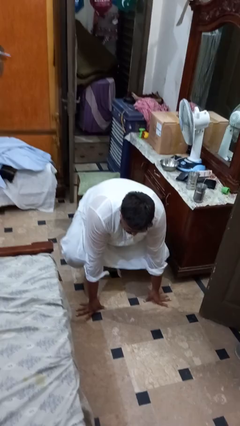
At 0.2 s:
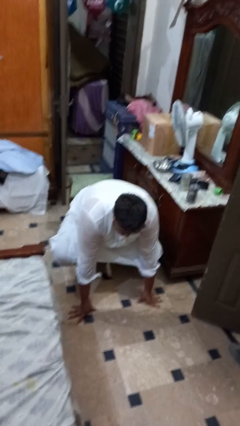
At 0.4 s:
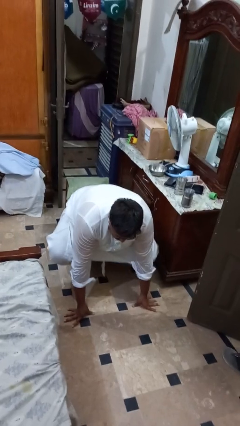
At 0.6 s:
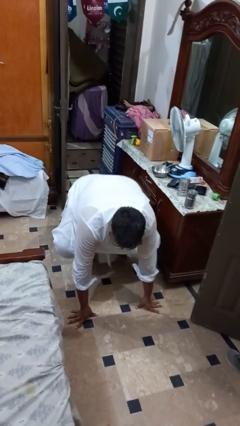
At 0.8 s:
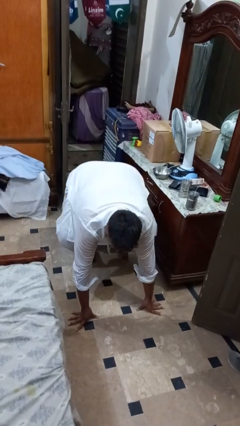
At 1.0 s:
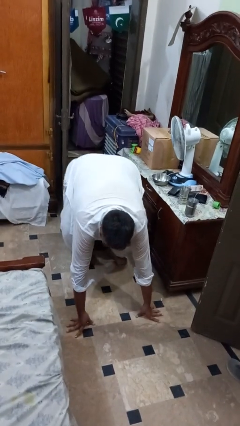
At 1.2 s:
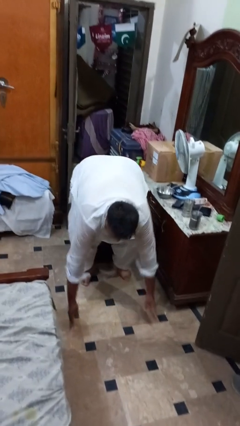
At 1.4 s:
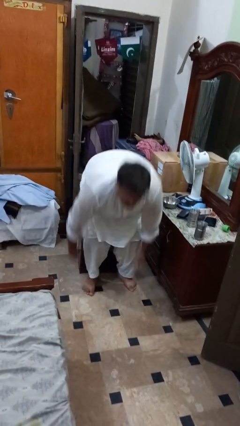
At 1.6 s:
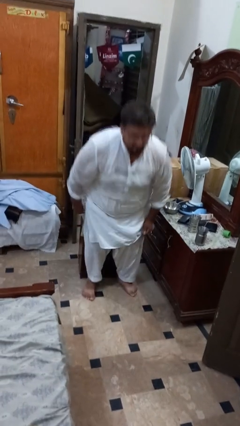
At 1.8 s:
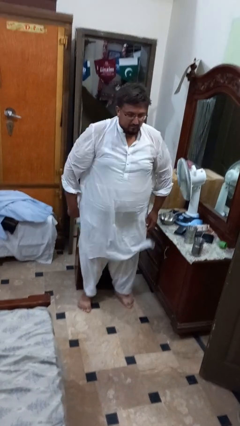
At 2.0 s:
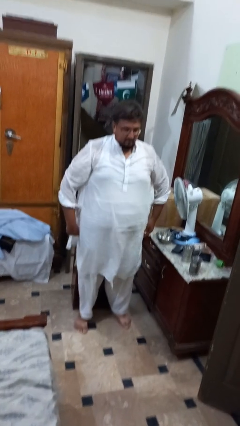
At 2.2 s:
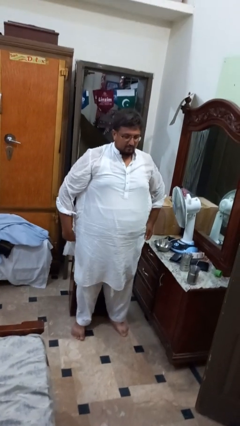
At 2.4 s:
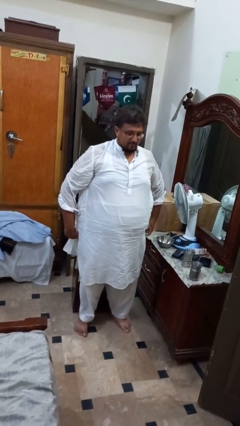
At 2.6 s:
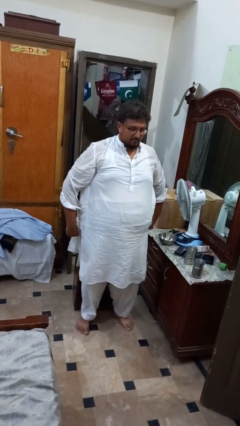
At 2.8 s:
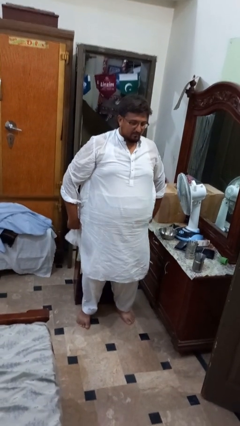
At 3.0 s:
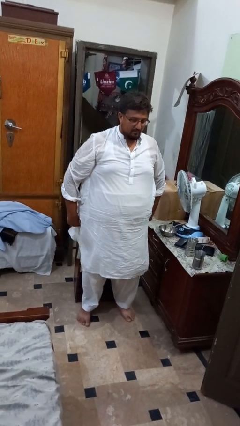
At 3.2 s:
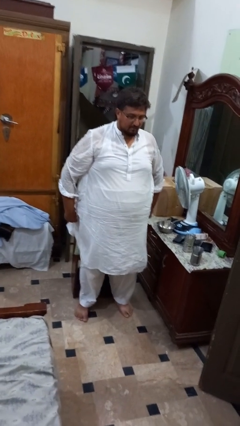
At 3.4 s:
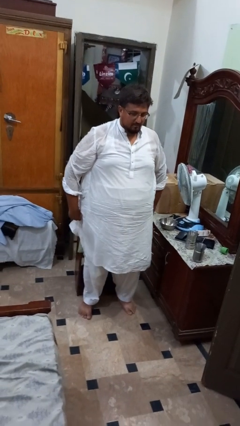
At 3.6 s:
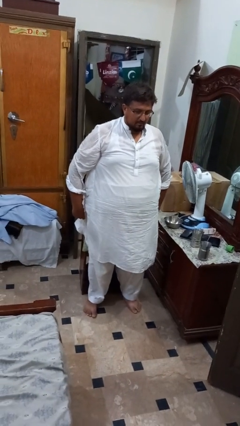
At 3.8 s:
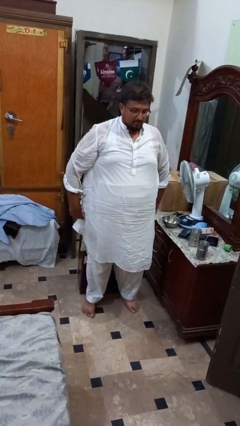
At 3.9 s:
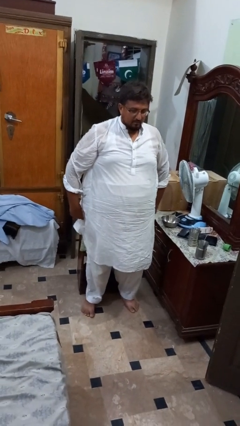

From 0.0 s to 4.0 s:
person stands up from floor

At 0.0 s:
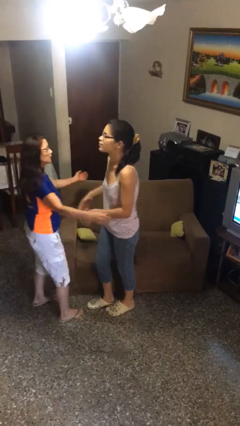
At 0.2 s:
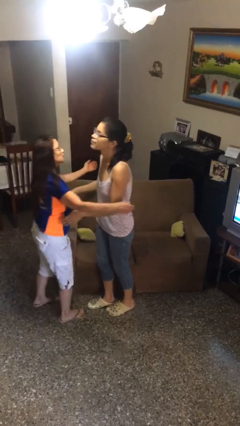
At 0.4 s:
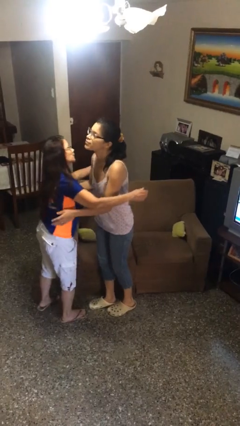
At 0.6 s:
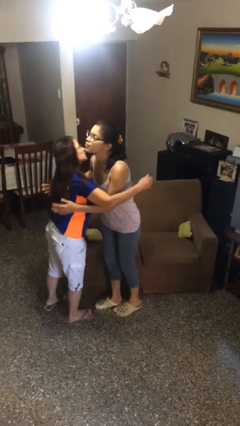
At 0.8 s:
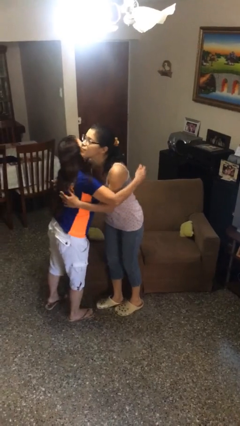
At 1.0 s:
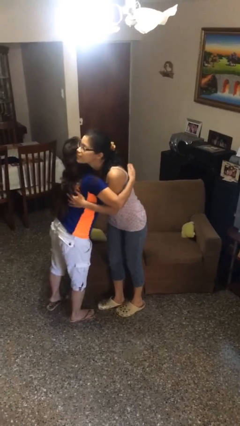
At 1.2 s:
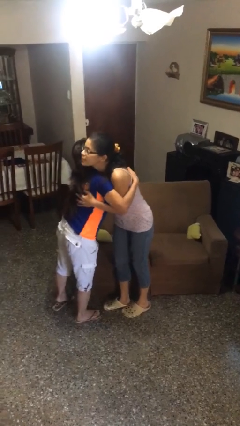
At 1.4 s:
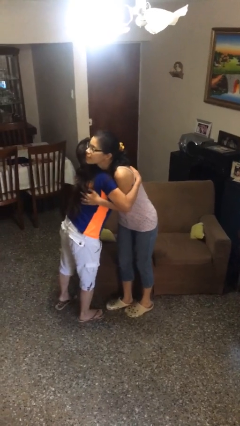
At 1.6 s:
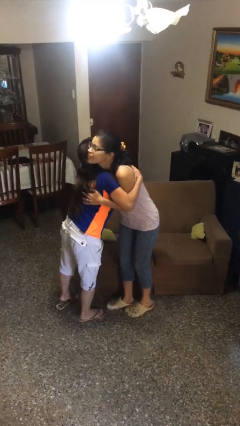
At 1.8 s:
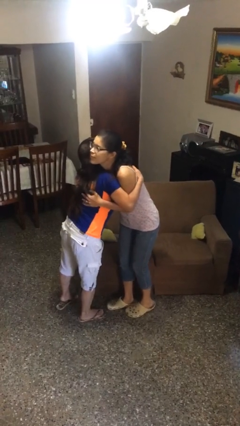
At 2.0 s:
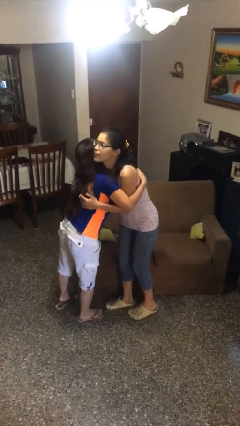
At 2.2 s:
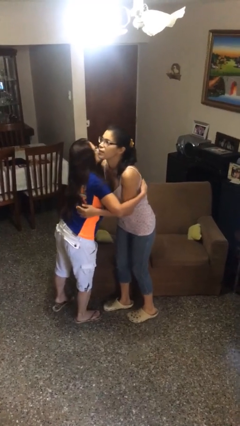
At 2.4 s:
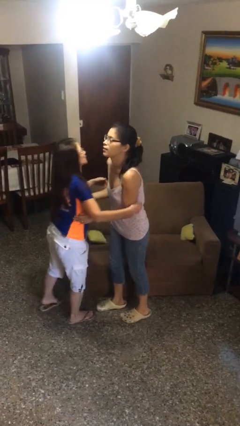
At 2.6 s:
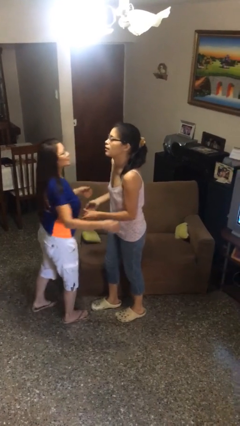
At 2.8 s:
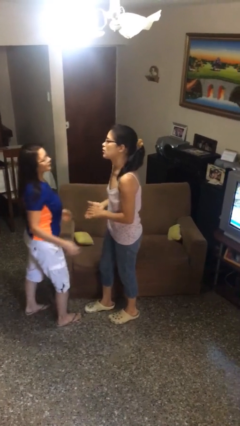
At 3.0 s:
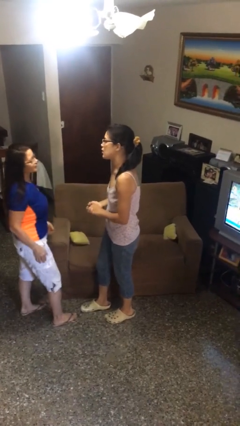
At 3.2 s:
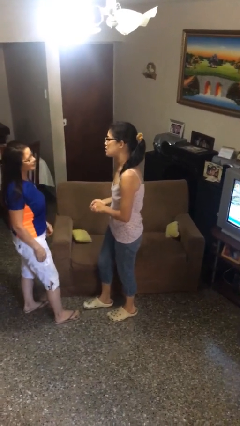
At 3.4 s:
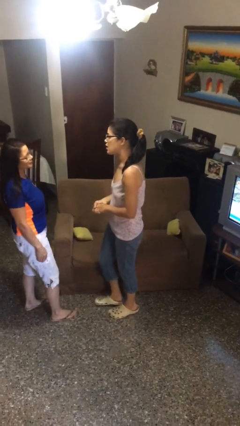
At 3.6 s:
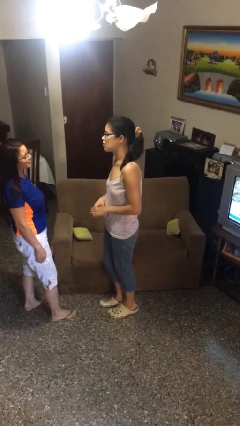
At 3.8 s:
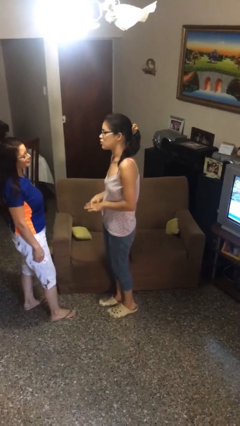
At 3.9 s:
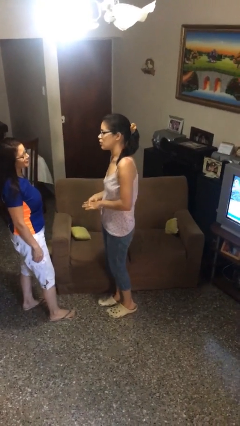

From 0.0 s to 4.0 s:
person embraces person

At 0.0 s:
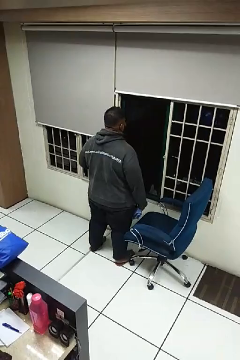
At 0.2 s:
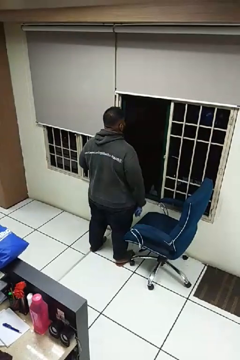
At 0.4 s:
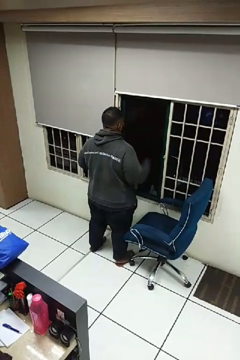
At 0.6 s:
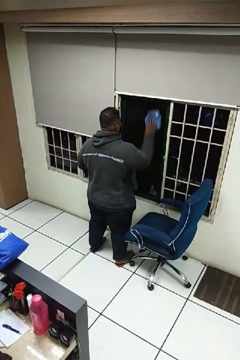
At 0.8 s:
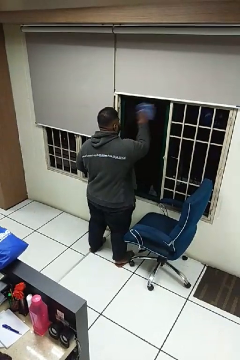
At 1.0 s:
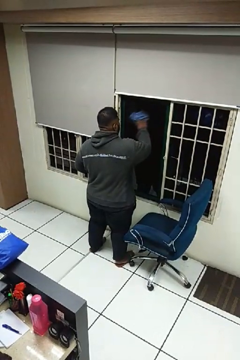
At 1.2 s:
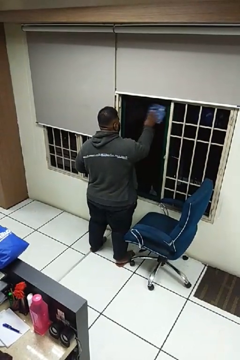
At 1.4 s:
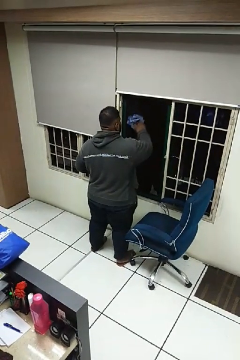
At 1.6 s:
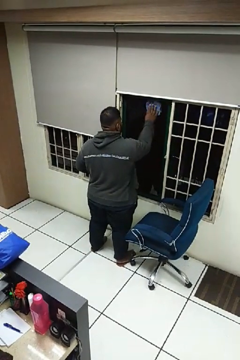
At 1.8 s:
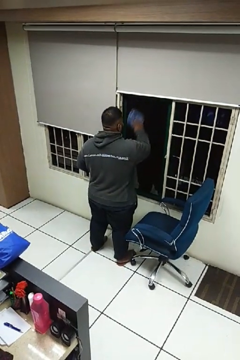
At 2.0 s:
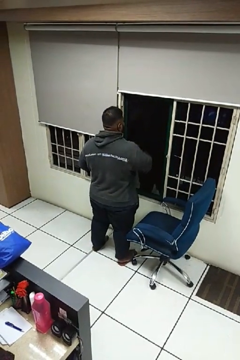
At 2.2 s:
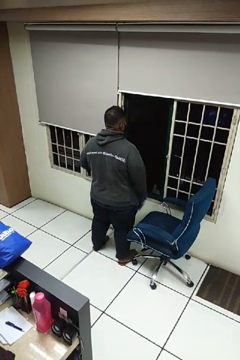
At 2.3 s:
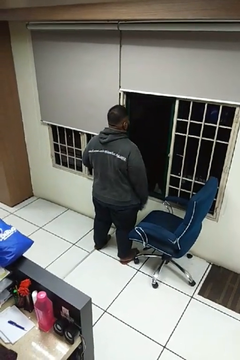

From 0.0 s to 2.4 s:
person washes window

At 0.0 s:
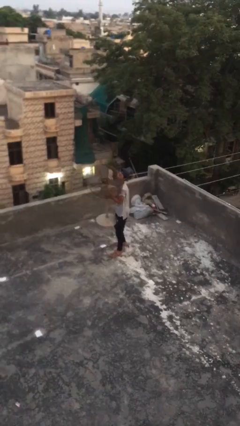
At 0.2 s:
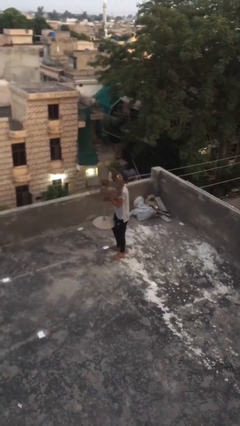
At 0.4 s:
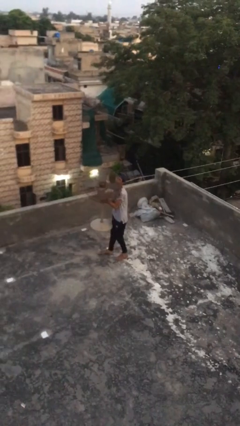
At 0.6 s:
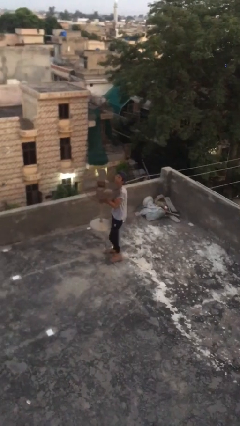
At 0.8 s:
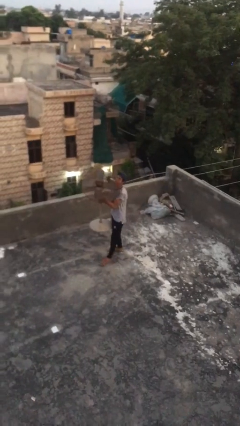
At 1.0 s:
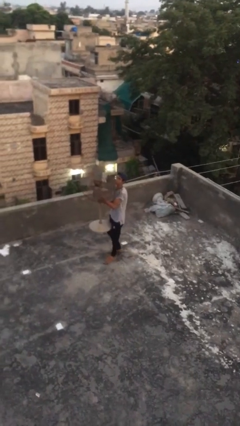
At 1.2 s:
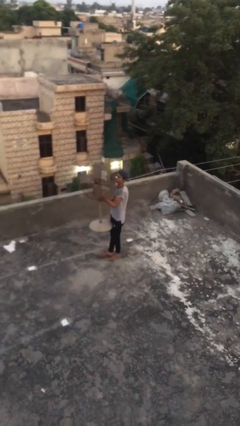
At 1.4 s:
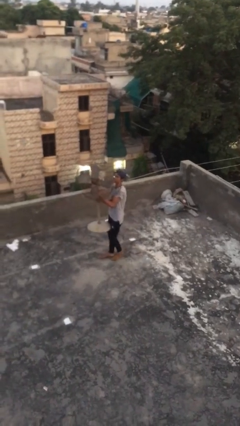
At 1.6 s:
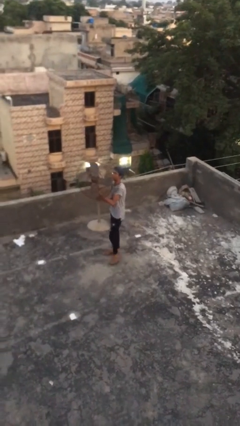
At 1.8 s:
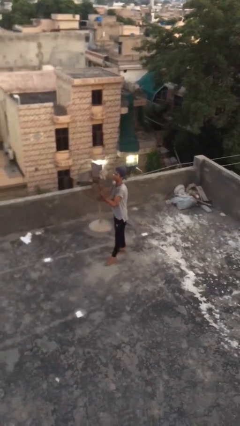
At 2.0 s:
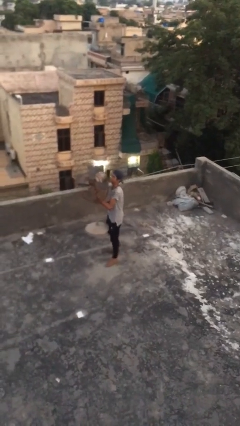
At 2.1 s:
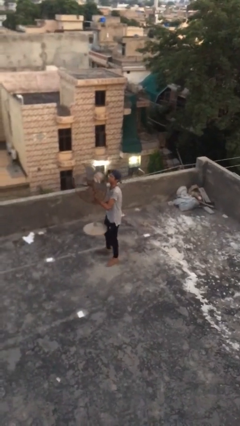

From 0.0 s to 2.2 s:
person carries heavy object

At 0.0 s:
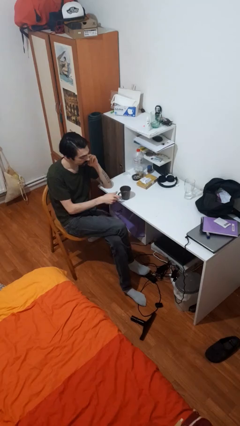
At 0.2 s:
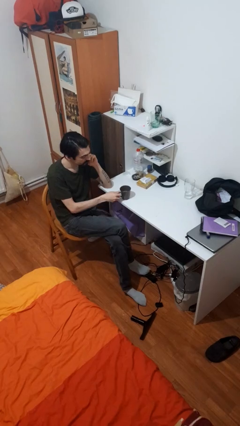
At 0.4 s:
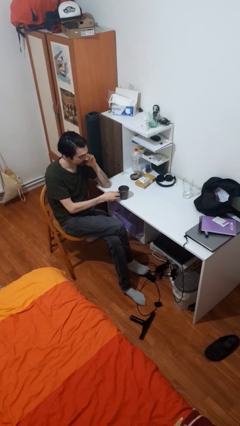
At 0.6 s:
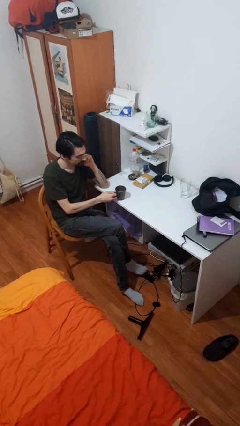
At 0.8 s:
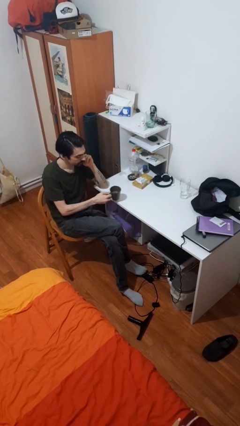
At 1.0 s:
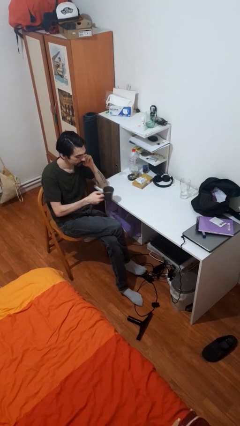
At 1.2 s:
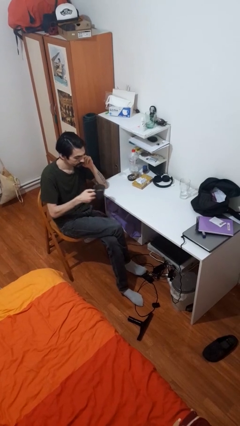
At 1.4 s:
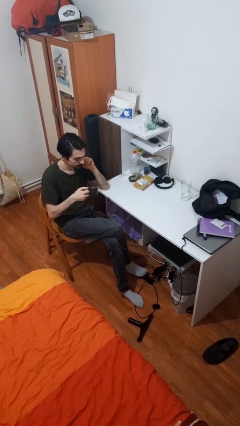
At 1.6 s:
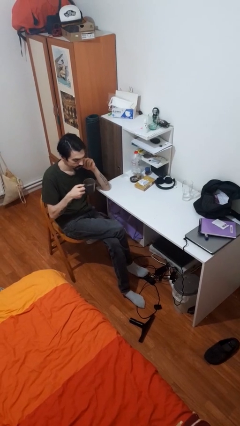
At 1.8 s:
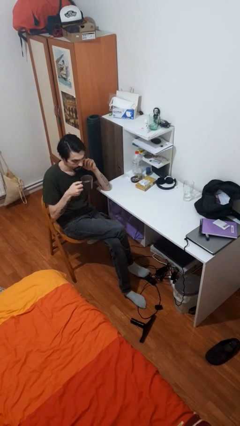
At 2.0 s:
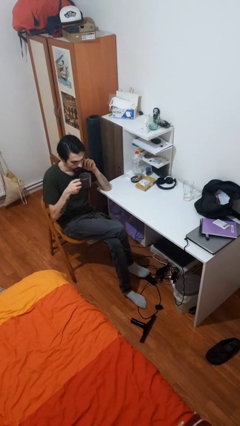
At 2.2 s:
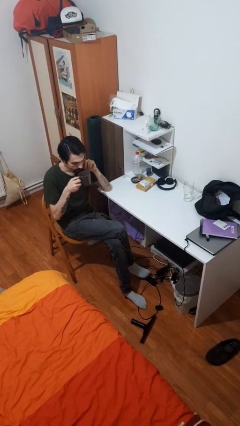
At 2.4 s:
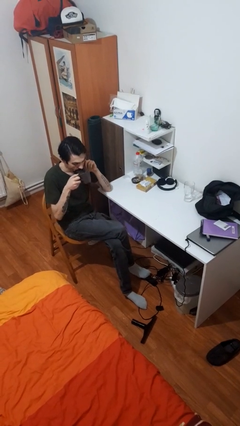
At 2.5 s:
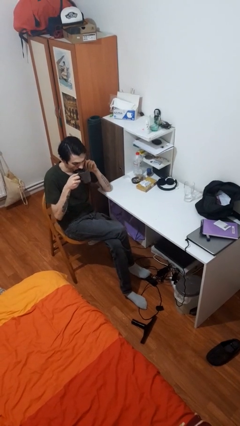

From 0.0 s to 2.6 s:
person picks up object from table

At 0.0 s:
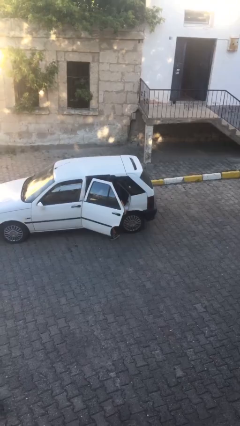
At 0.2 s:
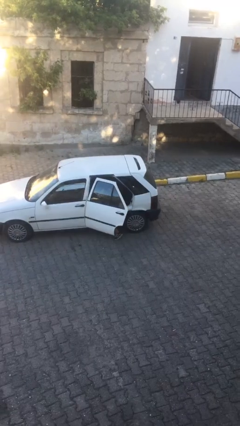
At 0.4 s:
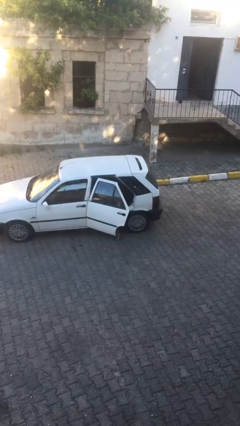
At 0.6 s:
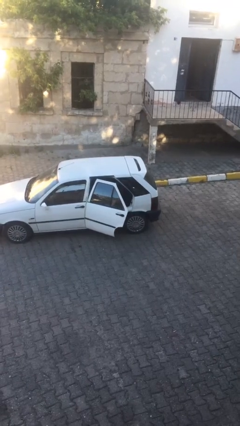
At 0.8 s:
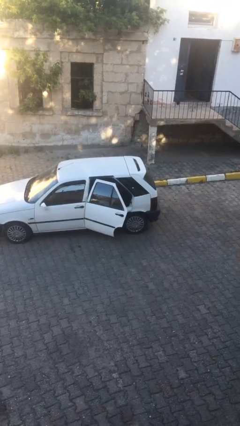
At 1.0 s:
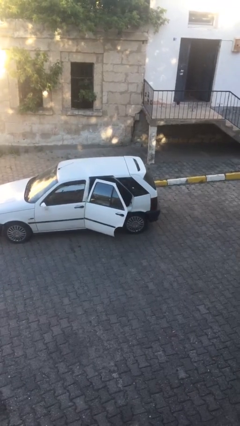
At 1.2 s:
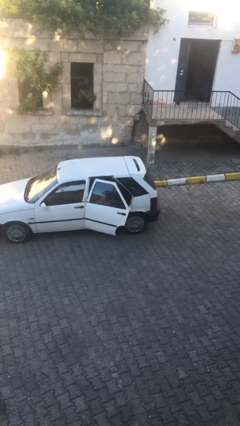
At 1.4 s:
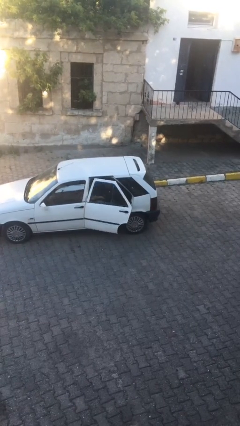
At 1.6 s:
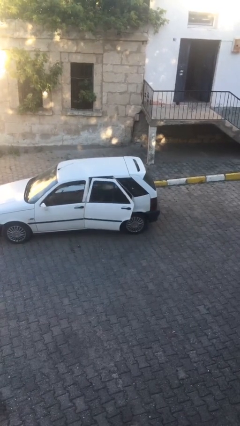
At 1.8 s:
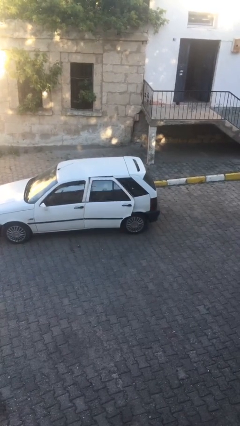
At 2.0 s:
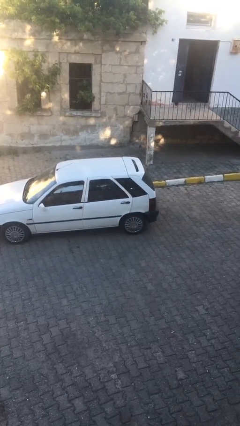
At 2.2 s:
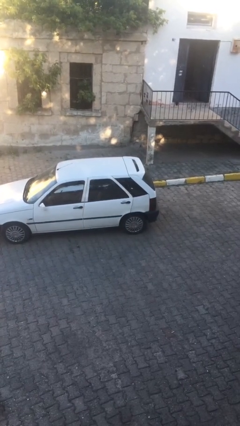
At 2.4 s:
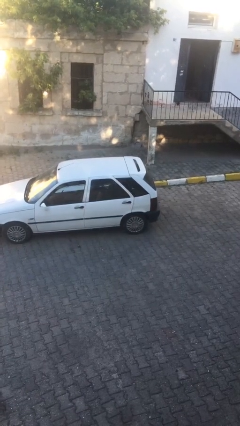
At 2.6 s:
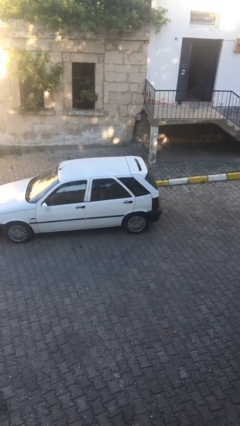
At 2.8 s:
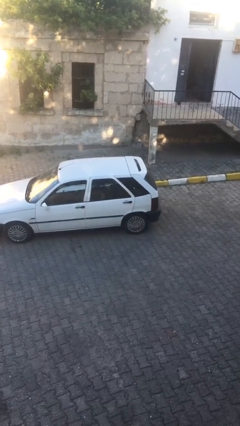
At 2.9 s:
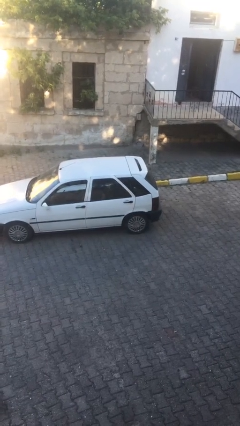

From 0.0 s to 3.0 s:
person closes car door
